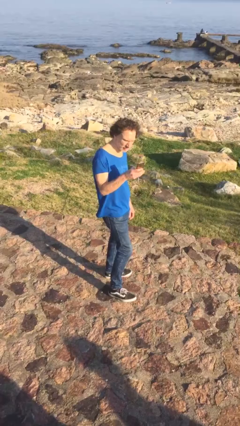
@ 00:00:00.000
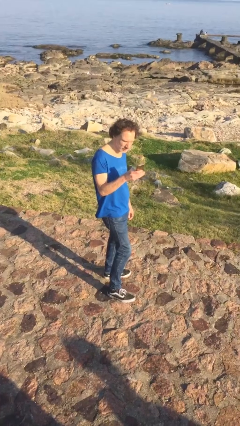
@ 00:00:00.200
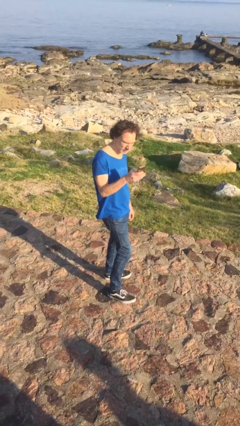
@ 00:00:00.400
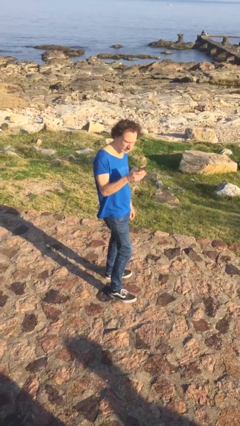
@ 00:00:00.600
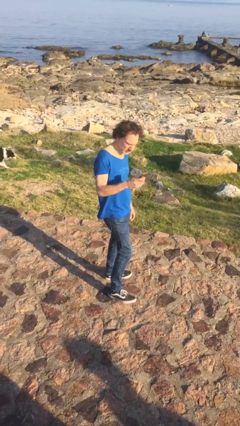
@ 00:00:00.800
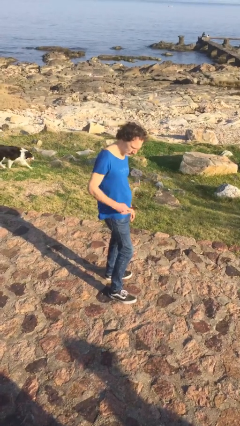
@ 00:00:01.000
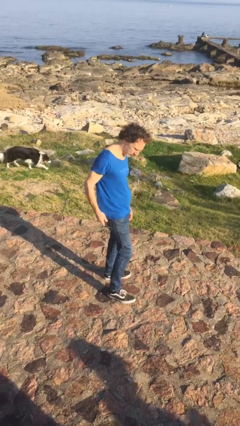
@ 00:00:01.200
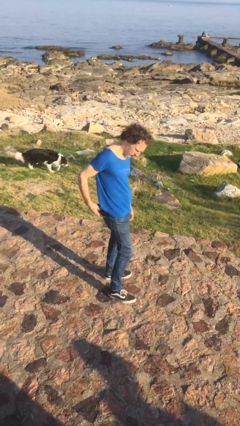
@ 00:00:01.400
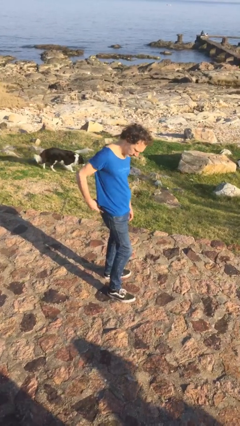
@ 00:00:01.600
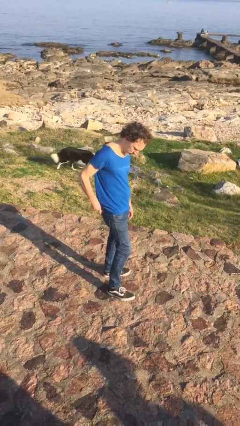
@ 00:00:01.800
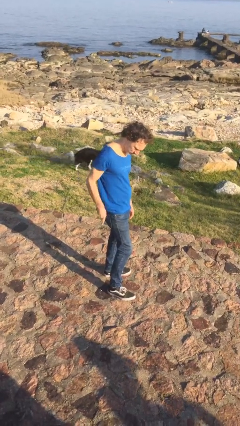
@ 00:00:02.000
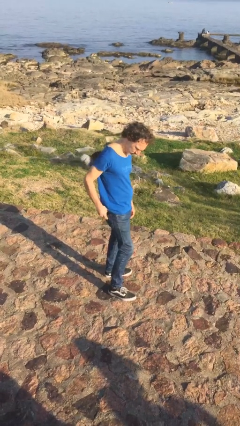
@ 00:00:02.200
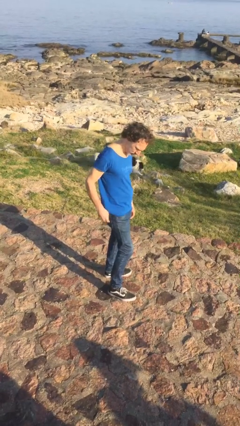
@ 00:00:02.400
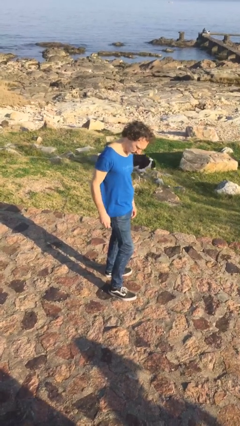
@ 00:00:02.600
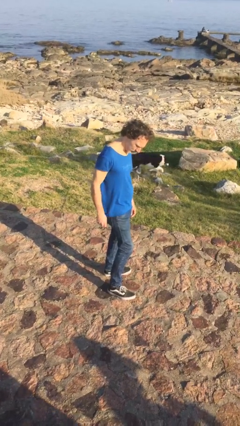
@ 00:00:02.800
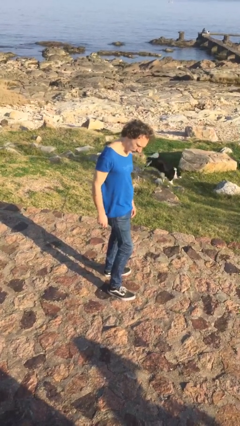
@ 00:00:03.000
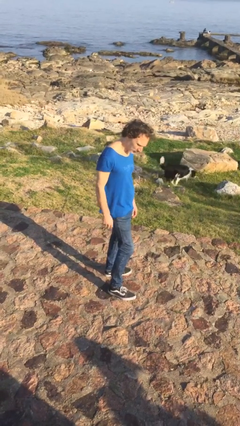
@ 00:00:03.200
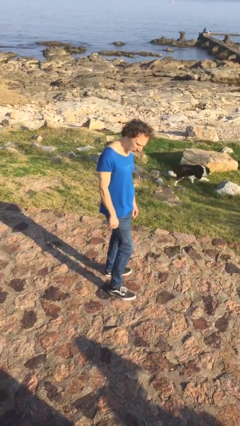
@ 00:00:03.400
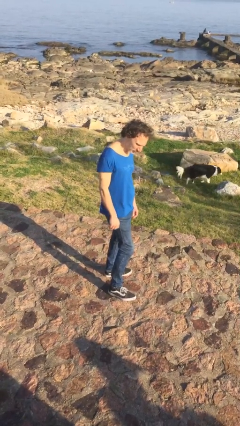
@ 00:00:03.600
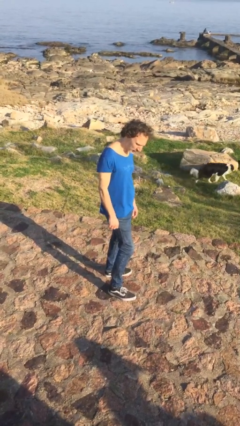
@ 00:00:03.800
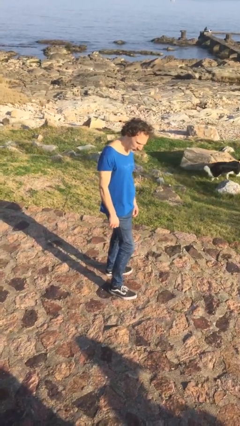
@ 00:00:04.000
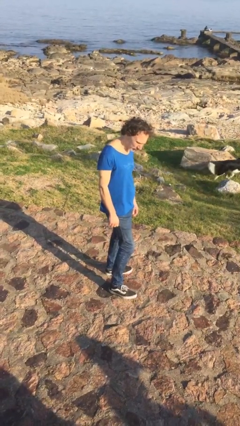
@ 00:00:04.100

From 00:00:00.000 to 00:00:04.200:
person puts phone into pocket

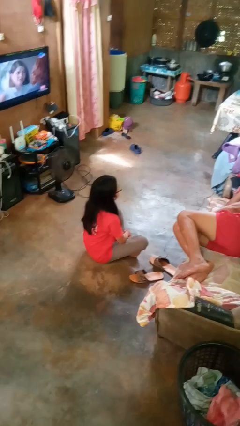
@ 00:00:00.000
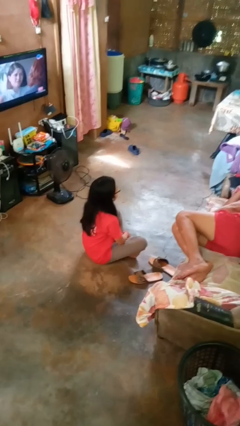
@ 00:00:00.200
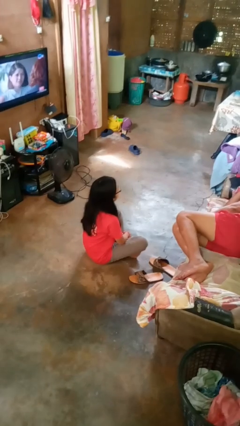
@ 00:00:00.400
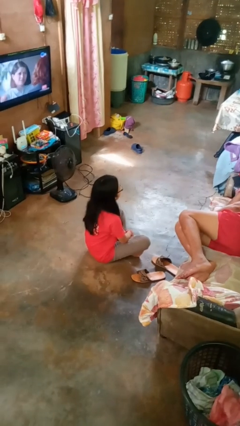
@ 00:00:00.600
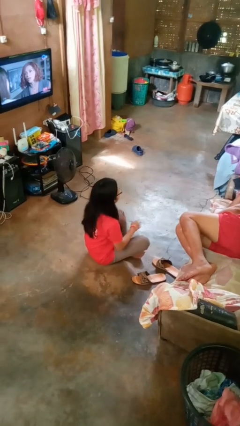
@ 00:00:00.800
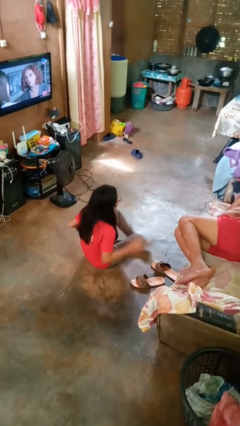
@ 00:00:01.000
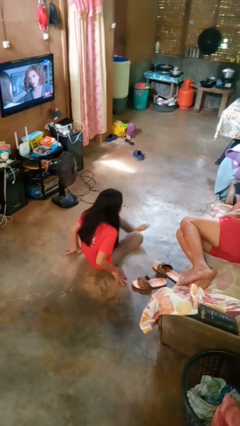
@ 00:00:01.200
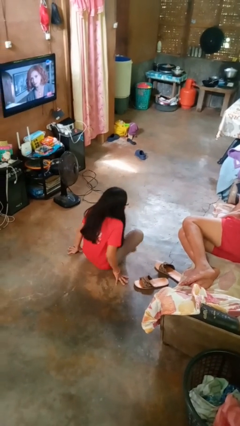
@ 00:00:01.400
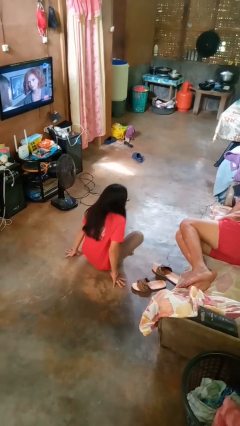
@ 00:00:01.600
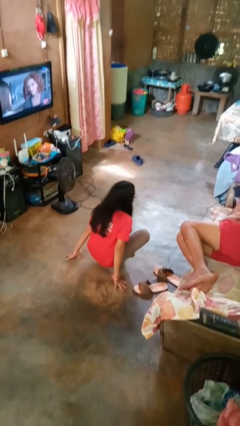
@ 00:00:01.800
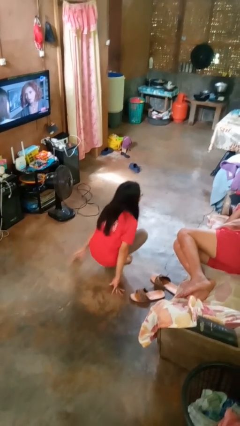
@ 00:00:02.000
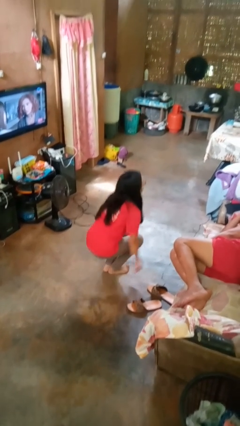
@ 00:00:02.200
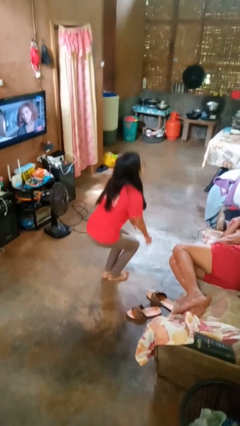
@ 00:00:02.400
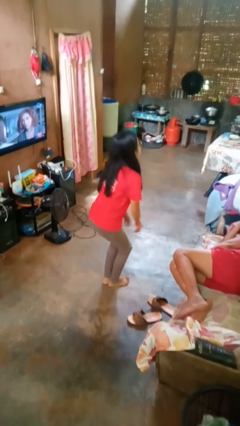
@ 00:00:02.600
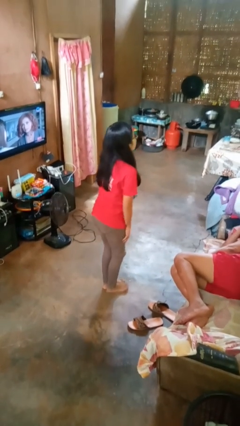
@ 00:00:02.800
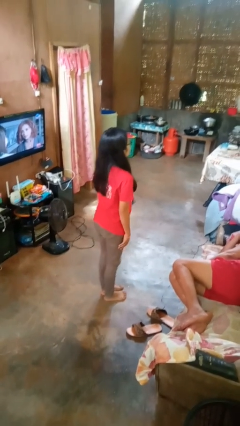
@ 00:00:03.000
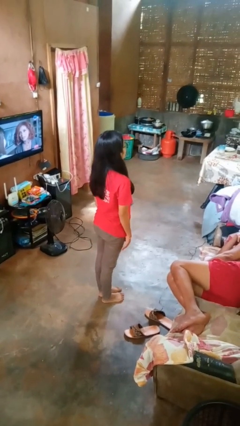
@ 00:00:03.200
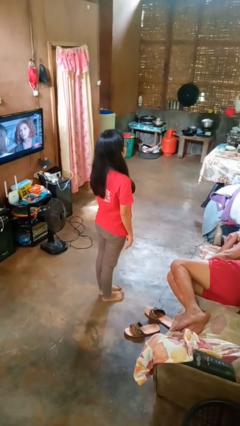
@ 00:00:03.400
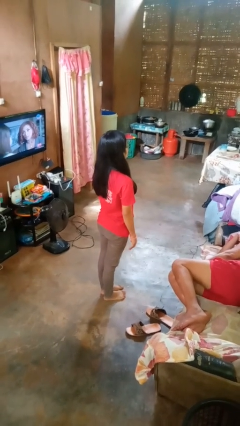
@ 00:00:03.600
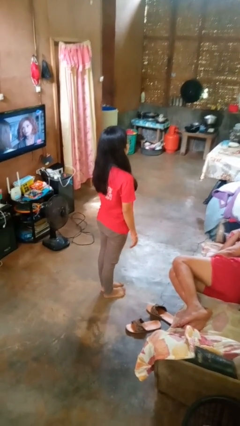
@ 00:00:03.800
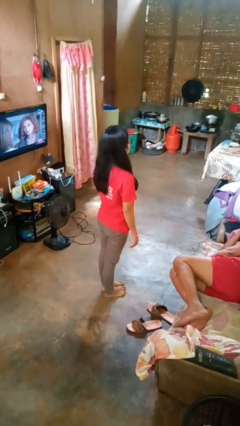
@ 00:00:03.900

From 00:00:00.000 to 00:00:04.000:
person stands up from floor

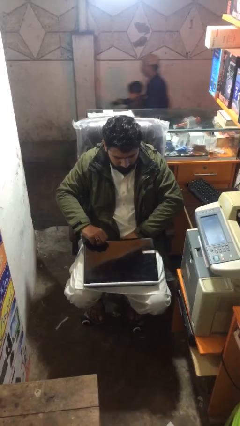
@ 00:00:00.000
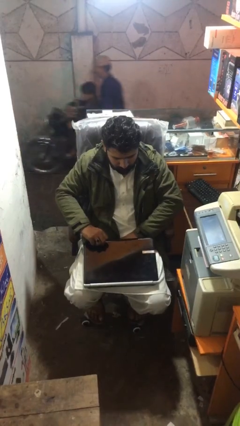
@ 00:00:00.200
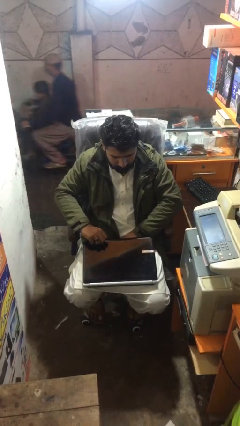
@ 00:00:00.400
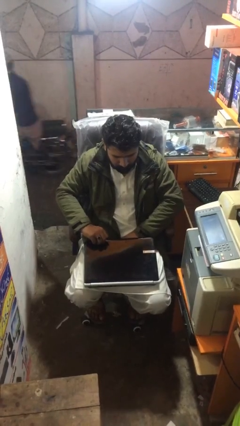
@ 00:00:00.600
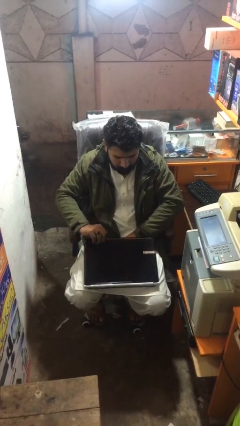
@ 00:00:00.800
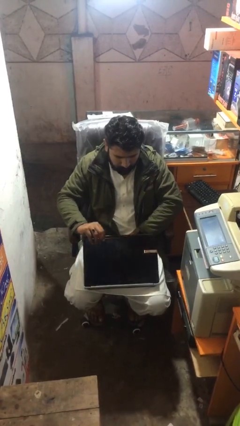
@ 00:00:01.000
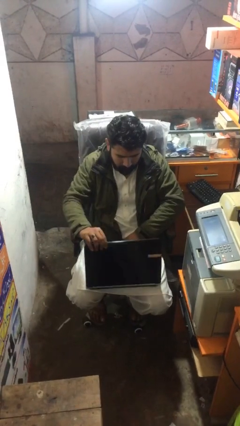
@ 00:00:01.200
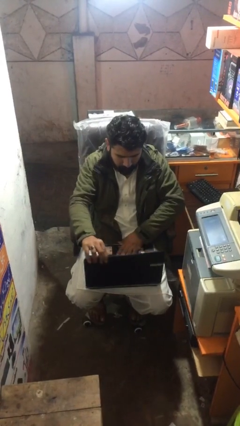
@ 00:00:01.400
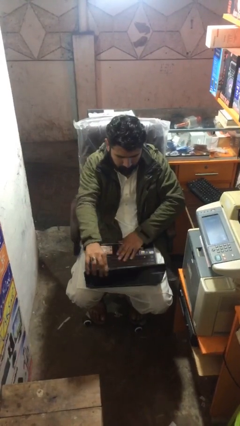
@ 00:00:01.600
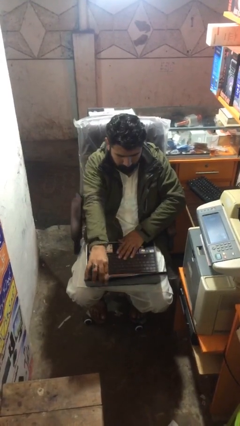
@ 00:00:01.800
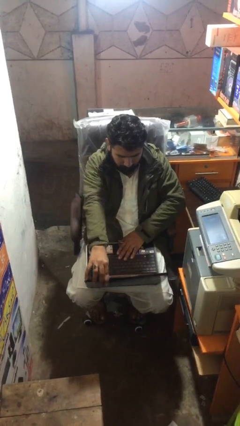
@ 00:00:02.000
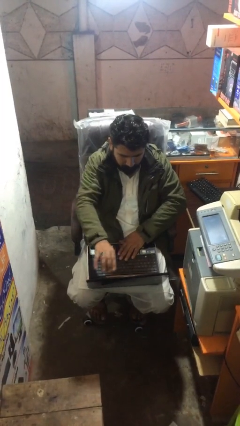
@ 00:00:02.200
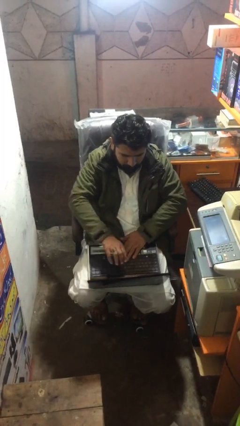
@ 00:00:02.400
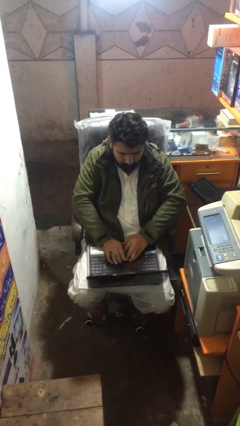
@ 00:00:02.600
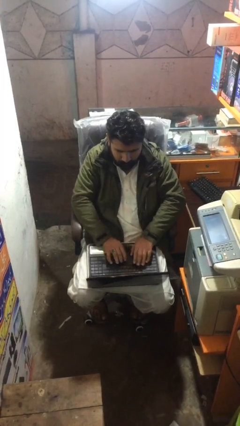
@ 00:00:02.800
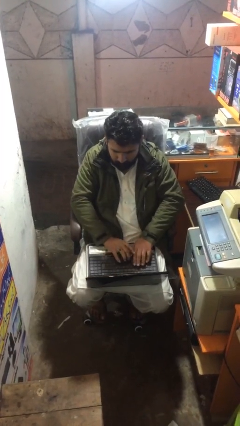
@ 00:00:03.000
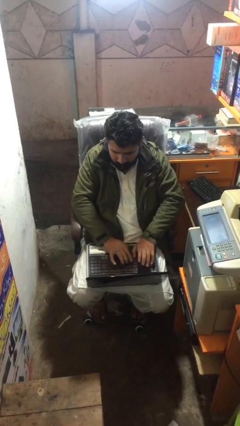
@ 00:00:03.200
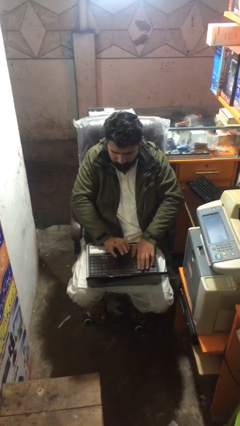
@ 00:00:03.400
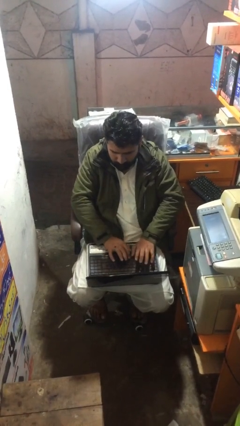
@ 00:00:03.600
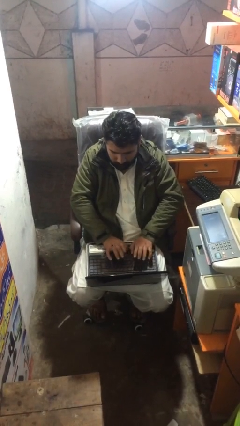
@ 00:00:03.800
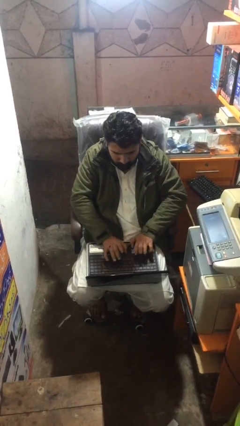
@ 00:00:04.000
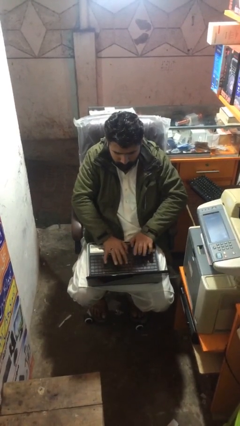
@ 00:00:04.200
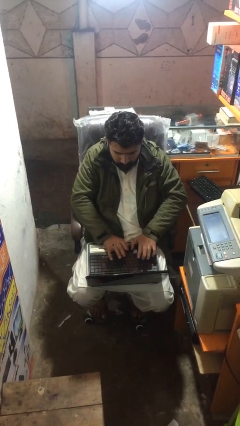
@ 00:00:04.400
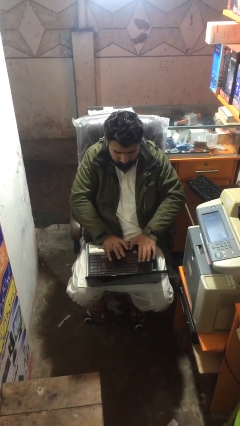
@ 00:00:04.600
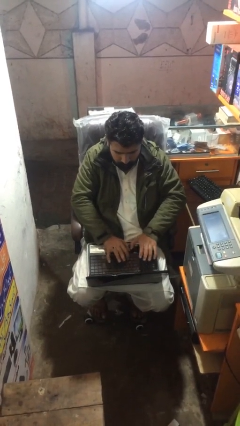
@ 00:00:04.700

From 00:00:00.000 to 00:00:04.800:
person interacts with laptop

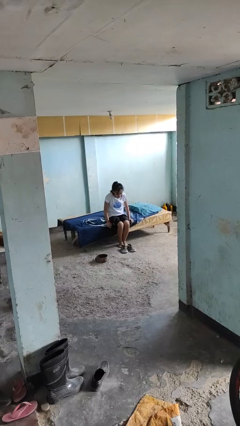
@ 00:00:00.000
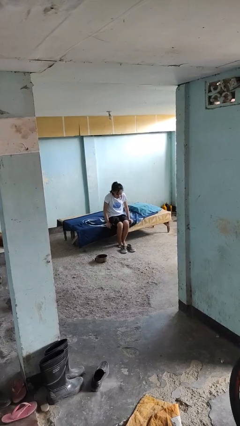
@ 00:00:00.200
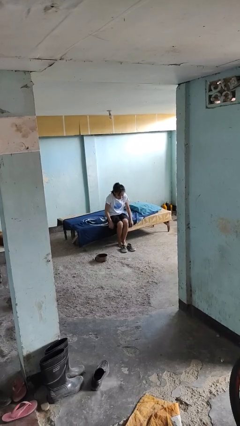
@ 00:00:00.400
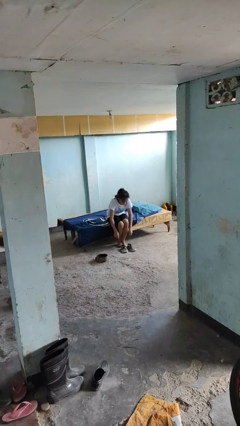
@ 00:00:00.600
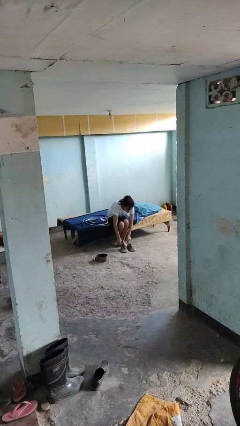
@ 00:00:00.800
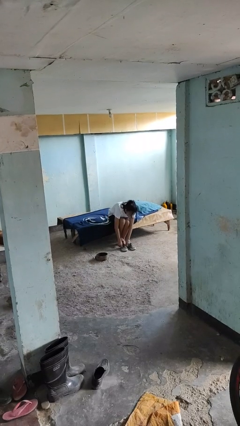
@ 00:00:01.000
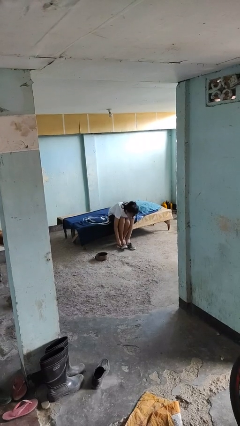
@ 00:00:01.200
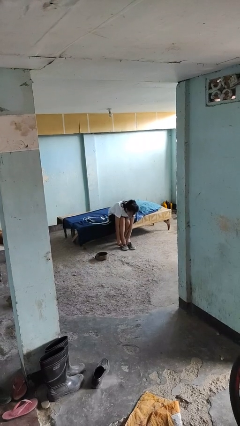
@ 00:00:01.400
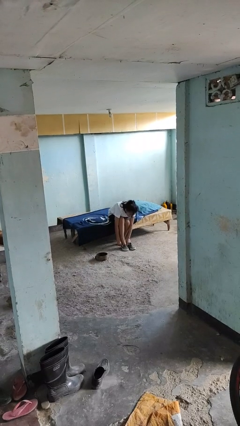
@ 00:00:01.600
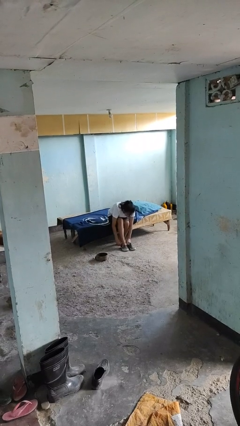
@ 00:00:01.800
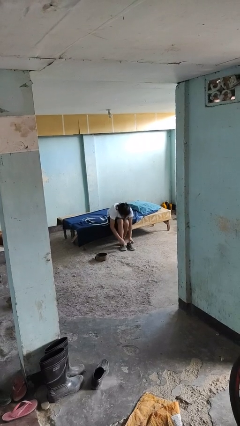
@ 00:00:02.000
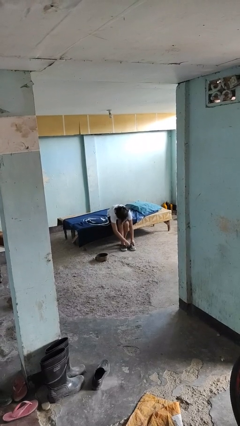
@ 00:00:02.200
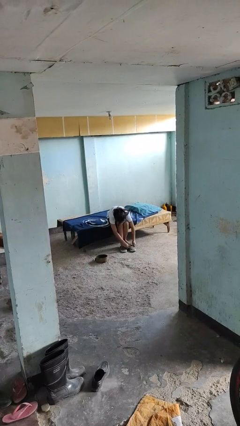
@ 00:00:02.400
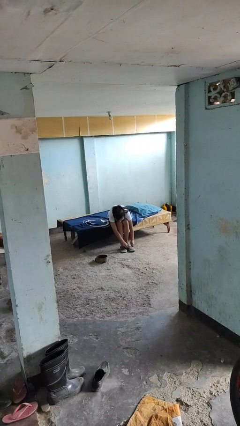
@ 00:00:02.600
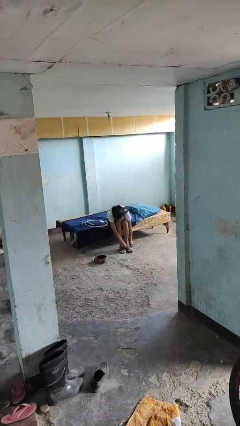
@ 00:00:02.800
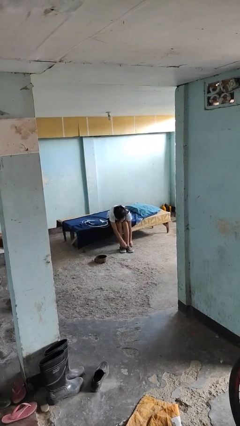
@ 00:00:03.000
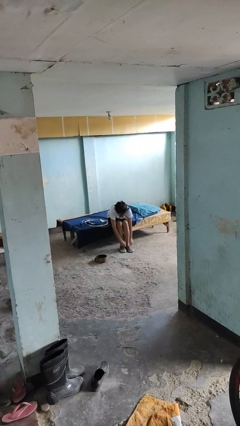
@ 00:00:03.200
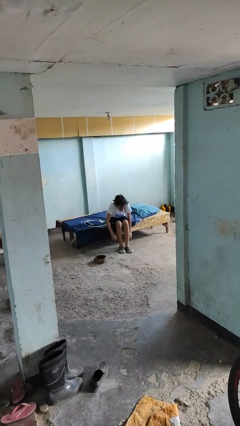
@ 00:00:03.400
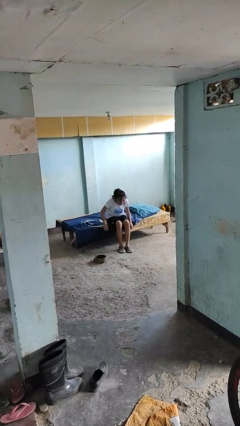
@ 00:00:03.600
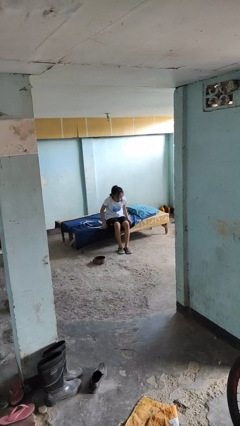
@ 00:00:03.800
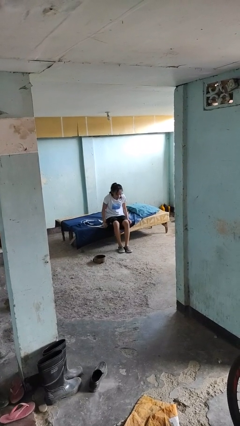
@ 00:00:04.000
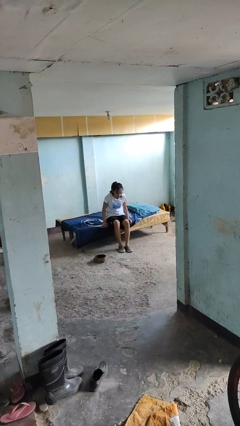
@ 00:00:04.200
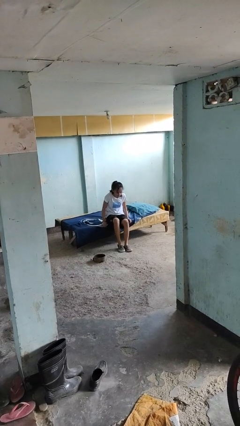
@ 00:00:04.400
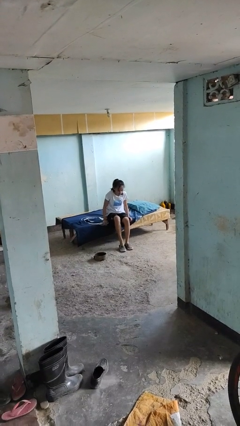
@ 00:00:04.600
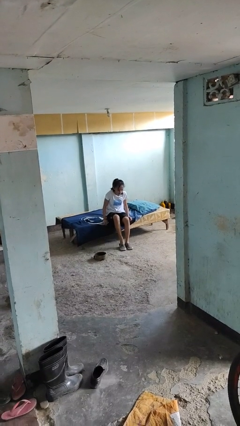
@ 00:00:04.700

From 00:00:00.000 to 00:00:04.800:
person puts on shoes
